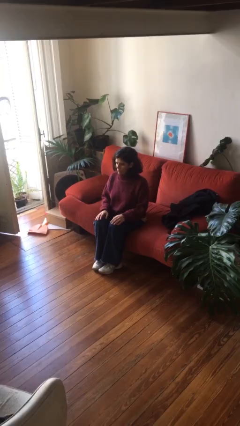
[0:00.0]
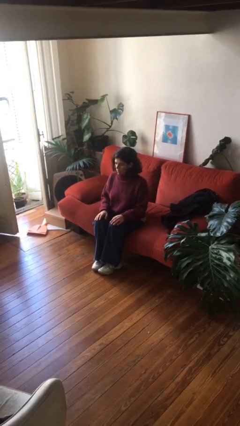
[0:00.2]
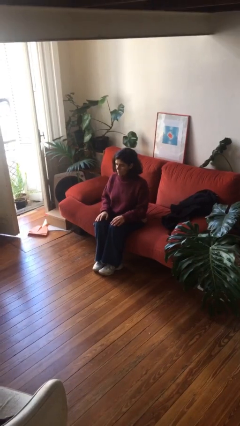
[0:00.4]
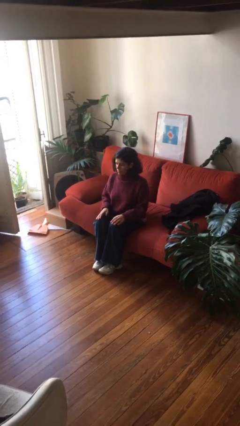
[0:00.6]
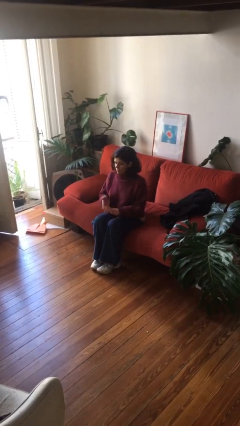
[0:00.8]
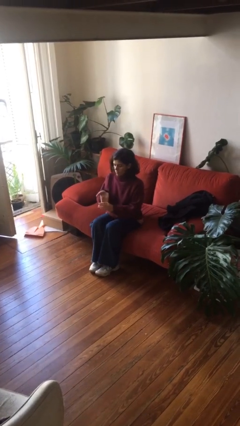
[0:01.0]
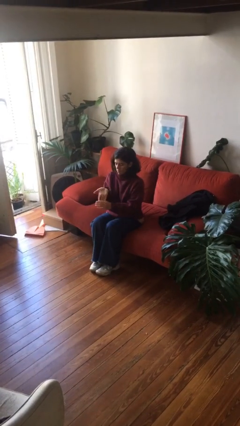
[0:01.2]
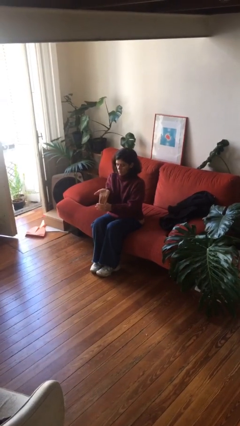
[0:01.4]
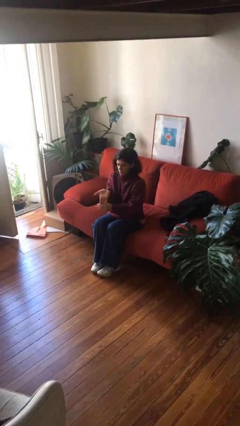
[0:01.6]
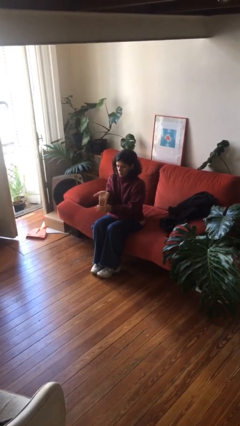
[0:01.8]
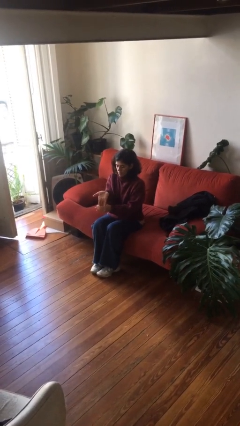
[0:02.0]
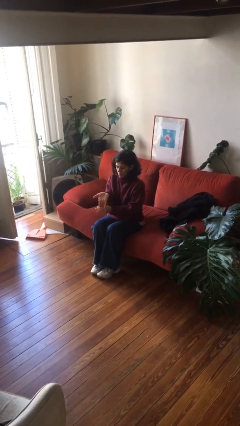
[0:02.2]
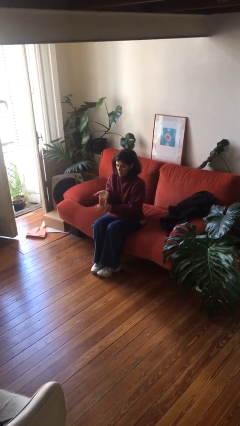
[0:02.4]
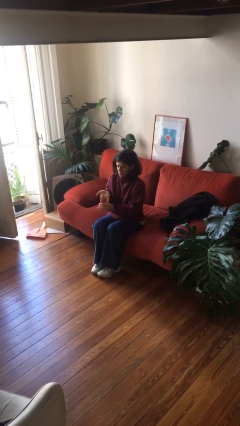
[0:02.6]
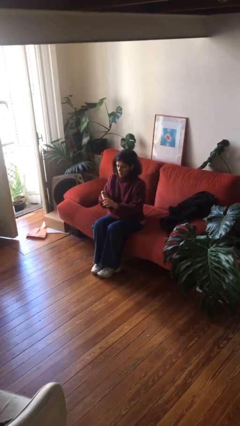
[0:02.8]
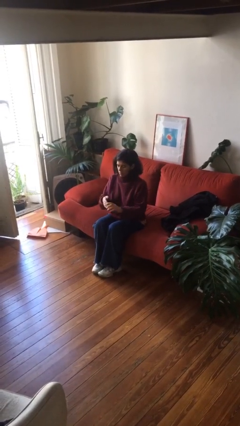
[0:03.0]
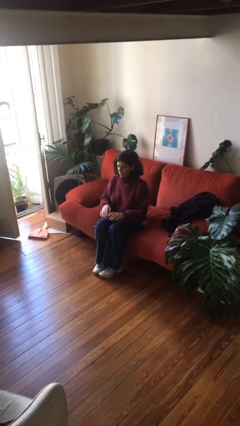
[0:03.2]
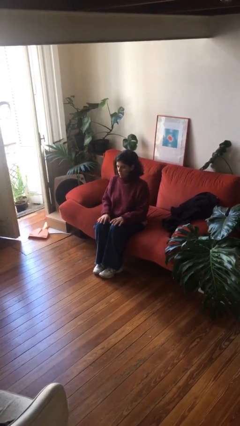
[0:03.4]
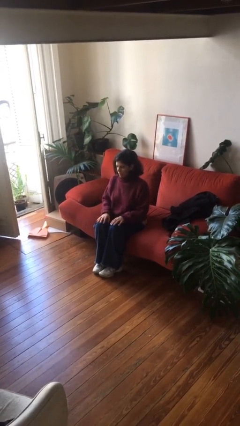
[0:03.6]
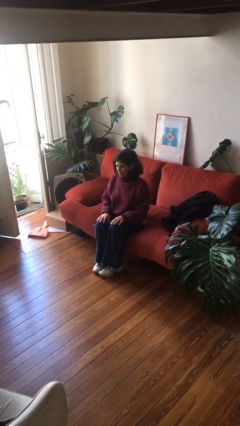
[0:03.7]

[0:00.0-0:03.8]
person cracks knuckles

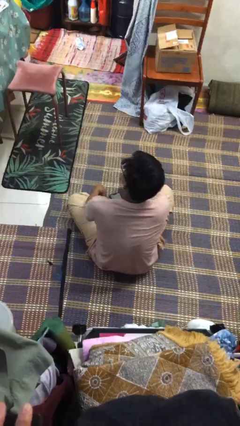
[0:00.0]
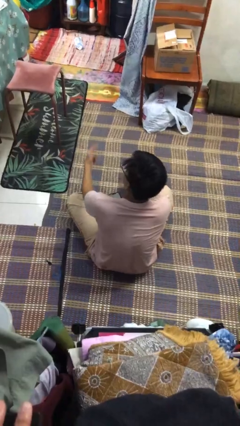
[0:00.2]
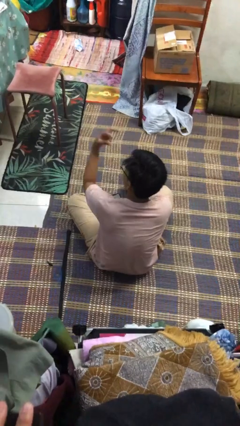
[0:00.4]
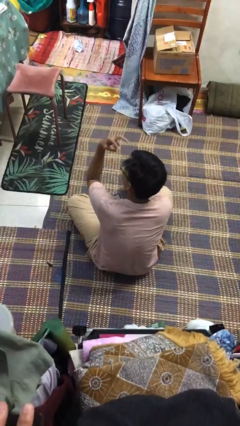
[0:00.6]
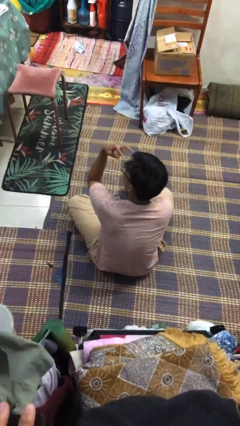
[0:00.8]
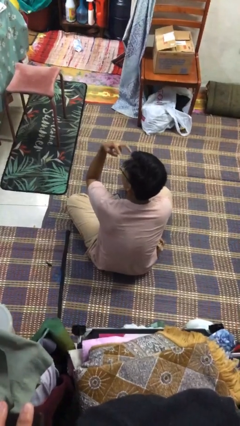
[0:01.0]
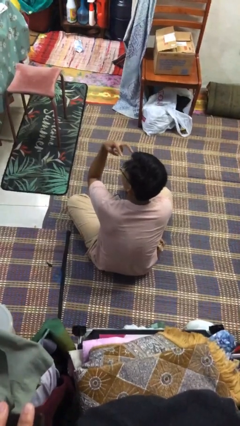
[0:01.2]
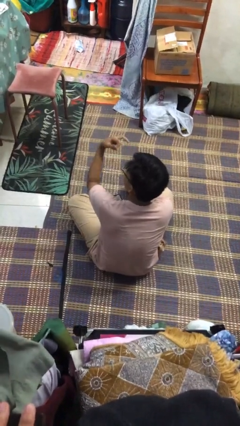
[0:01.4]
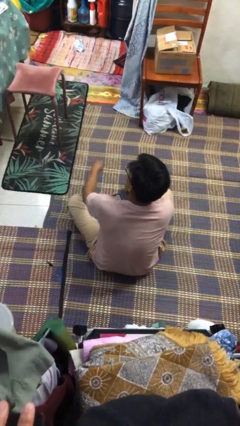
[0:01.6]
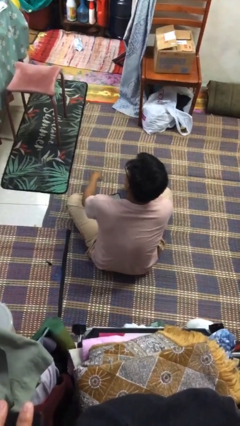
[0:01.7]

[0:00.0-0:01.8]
person gestures watch closely

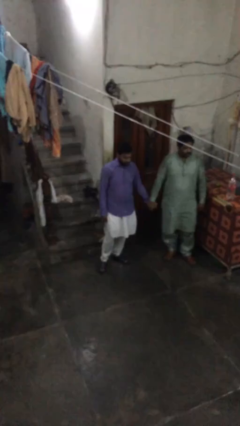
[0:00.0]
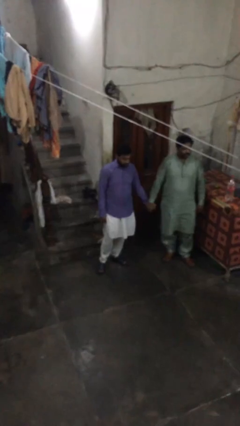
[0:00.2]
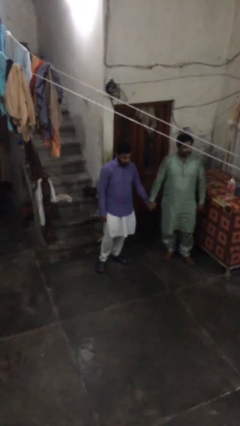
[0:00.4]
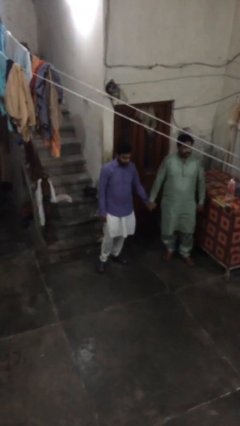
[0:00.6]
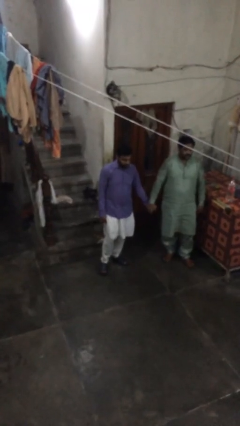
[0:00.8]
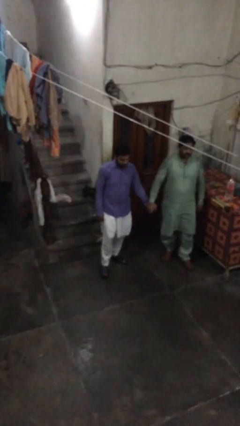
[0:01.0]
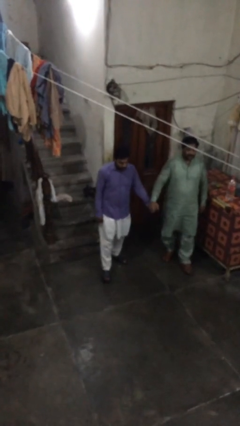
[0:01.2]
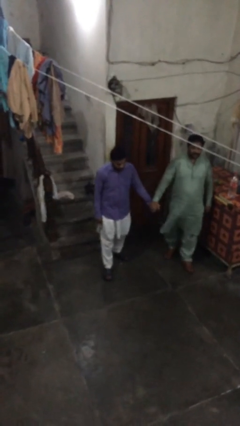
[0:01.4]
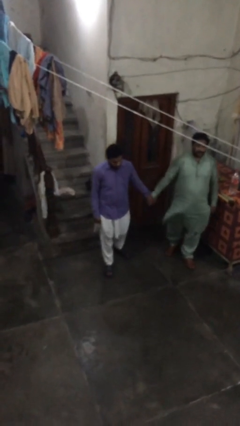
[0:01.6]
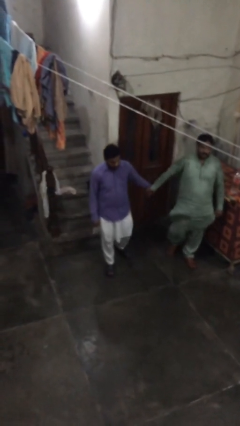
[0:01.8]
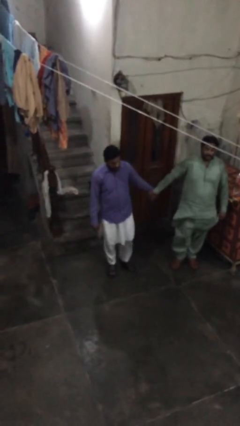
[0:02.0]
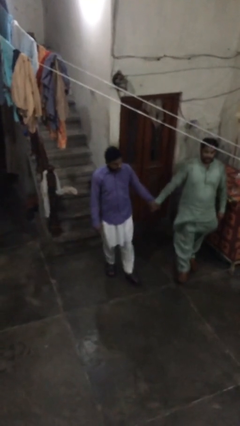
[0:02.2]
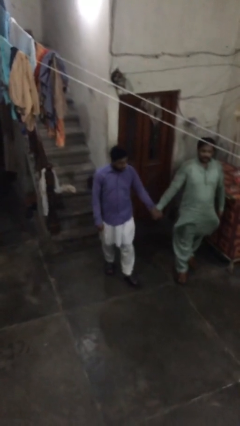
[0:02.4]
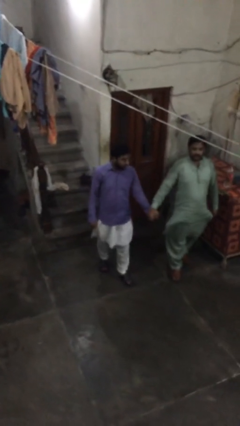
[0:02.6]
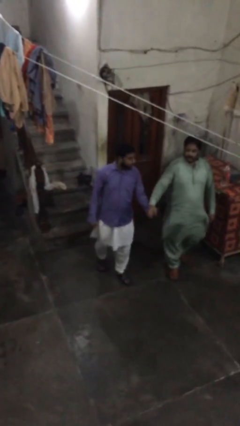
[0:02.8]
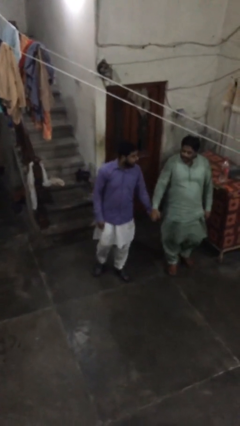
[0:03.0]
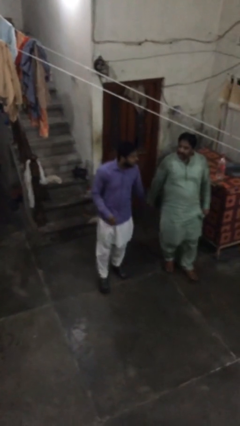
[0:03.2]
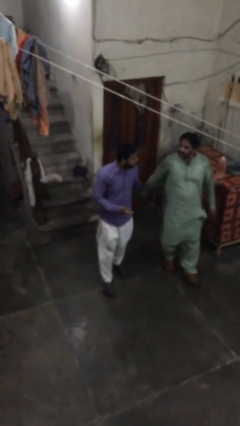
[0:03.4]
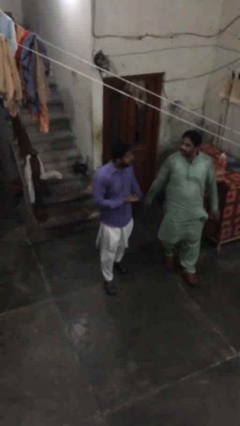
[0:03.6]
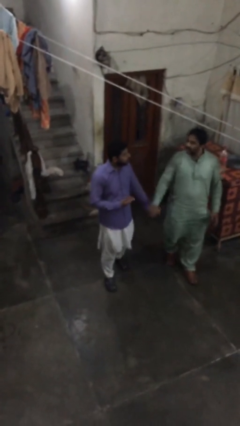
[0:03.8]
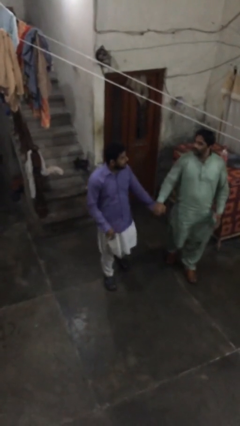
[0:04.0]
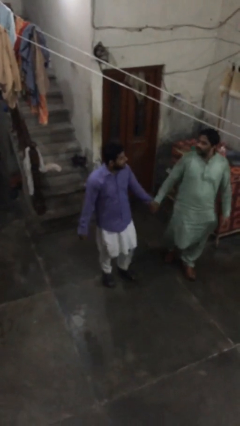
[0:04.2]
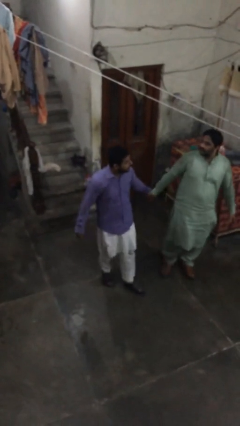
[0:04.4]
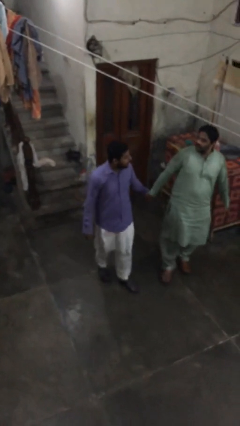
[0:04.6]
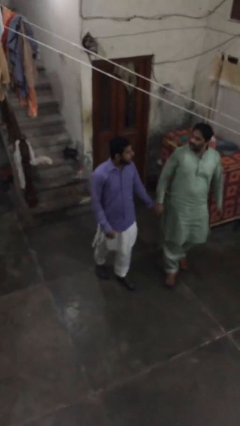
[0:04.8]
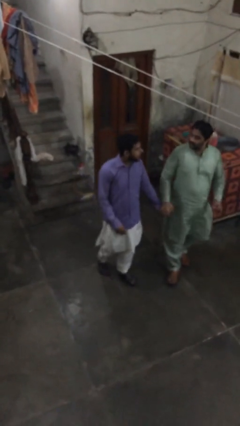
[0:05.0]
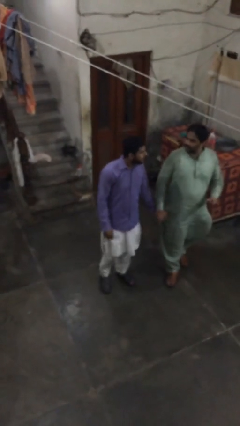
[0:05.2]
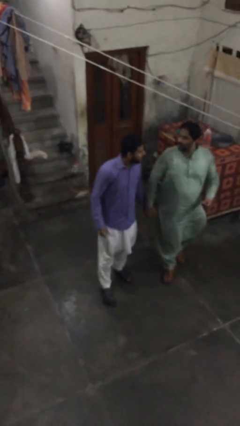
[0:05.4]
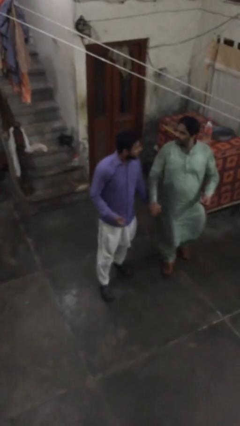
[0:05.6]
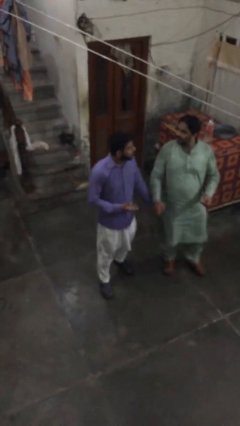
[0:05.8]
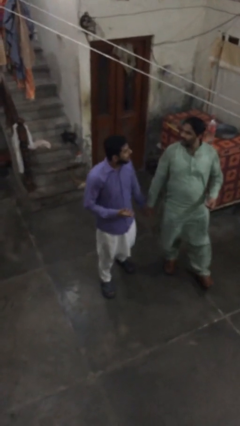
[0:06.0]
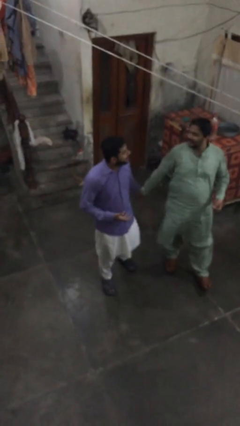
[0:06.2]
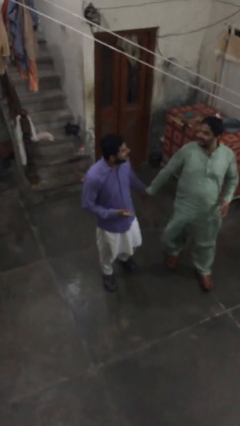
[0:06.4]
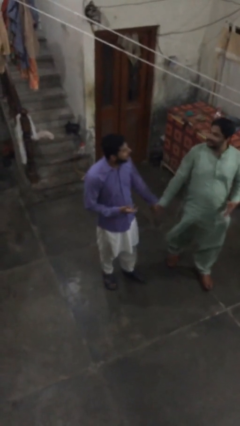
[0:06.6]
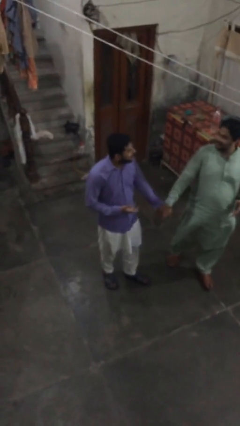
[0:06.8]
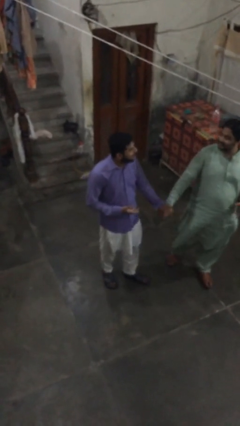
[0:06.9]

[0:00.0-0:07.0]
person holds hand

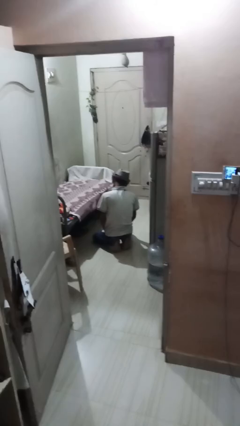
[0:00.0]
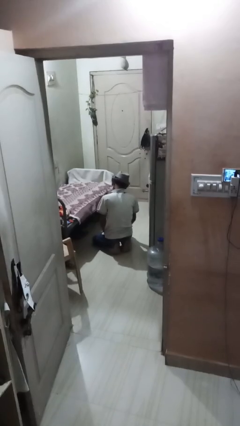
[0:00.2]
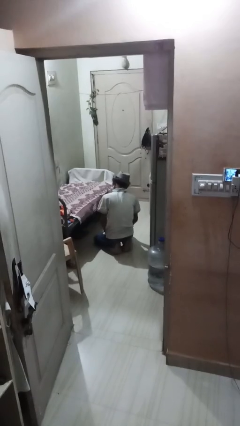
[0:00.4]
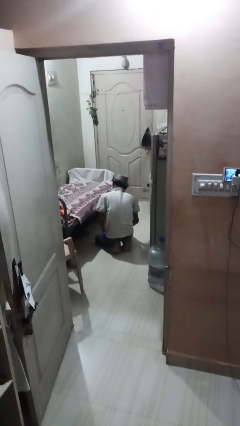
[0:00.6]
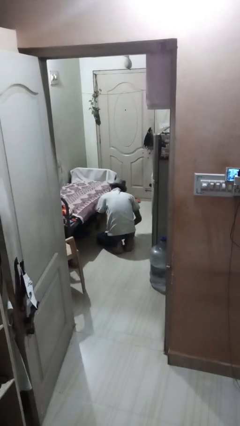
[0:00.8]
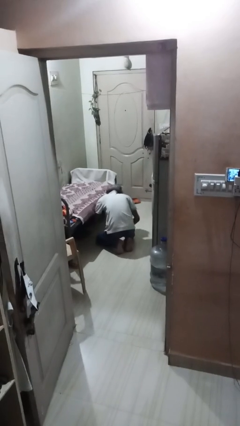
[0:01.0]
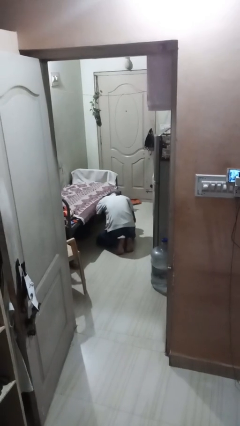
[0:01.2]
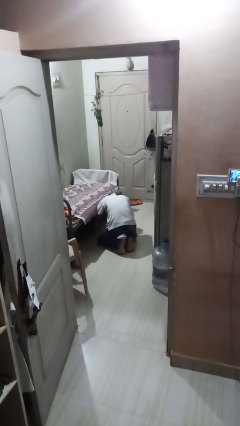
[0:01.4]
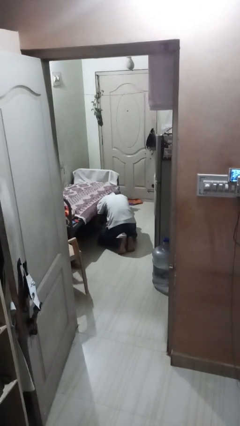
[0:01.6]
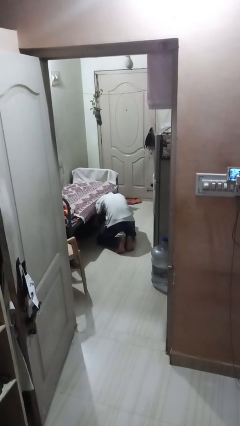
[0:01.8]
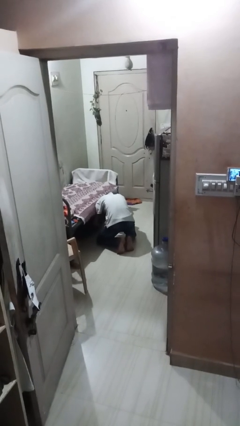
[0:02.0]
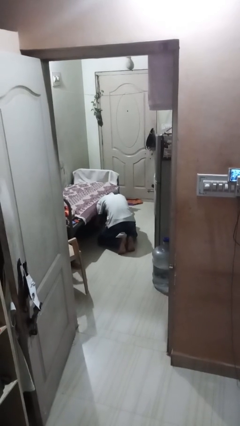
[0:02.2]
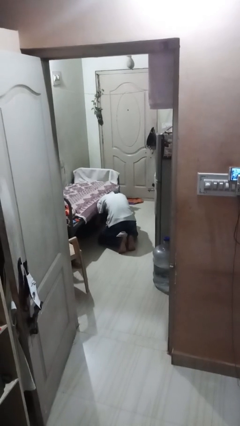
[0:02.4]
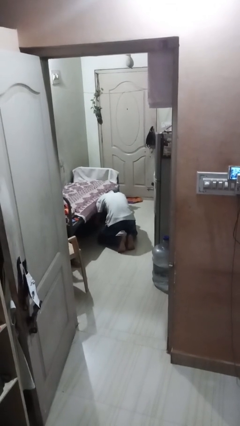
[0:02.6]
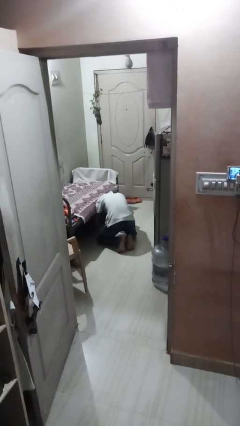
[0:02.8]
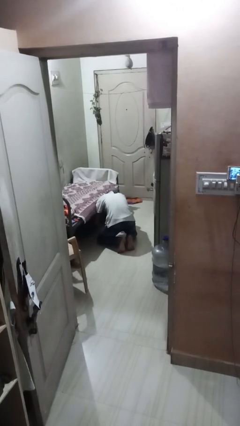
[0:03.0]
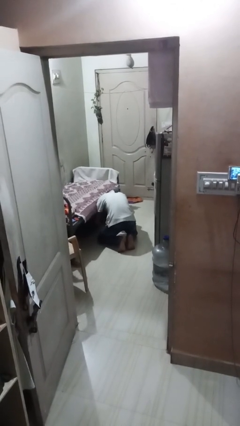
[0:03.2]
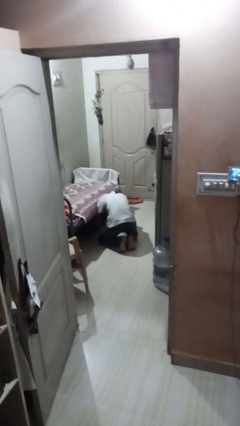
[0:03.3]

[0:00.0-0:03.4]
person searches under bed

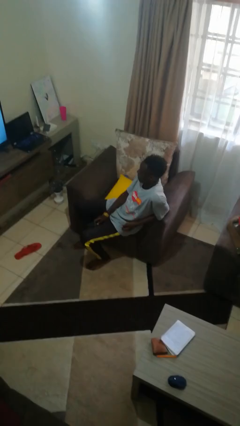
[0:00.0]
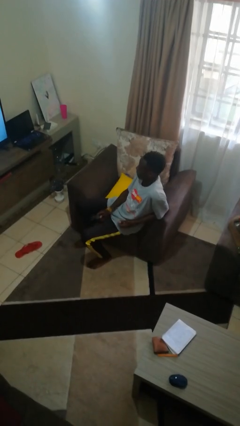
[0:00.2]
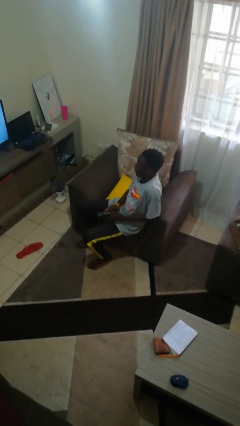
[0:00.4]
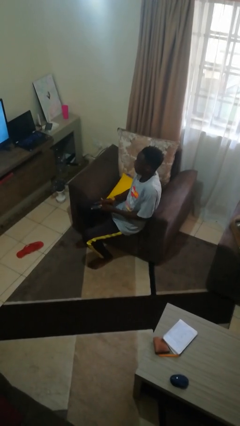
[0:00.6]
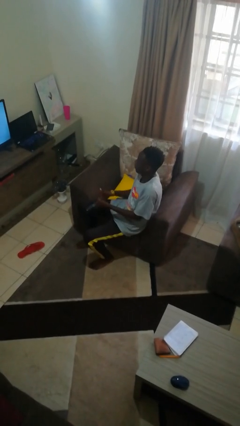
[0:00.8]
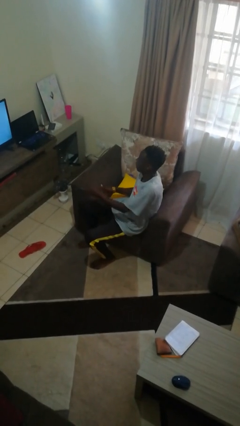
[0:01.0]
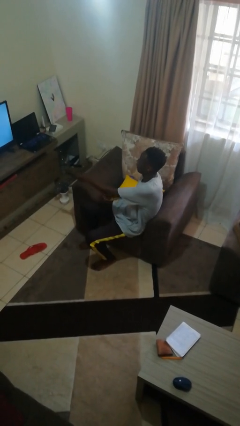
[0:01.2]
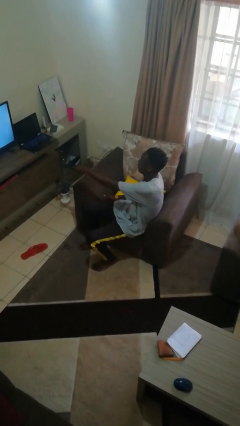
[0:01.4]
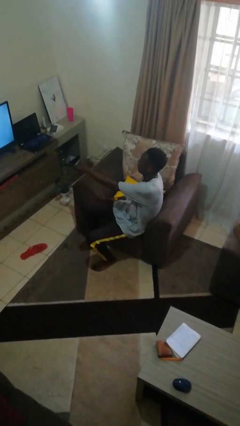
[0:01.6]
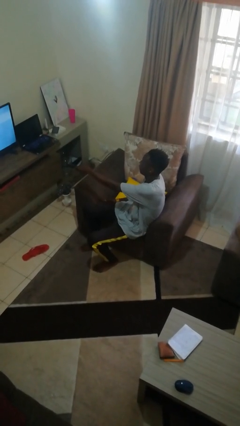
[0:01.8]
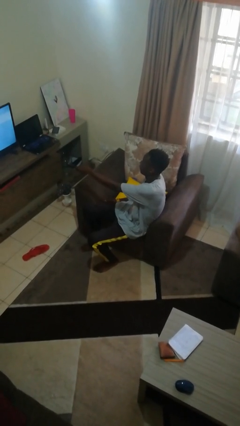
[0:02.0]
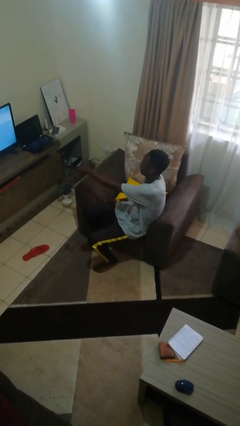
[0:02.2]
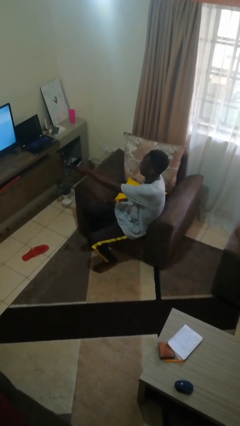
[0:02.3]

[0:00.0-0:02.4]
person uses television remote
